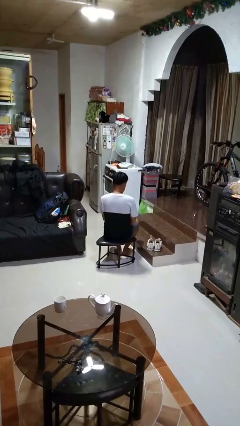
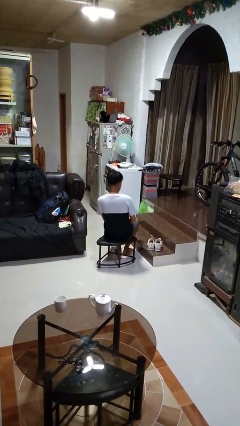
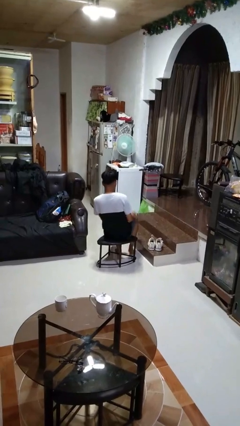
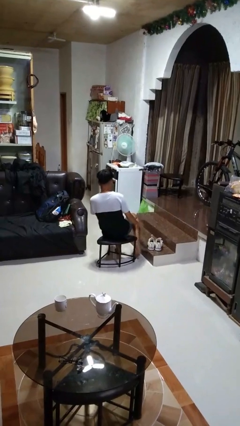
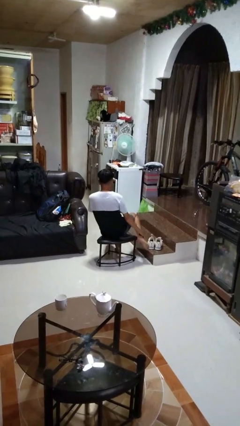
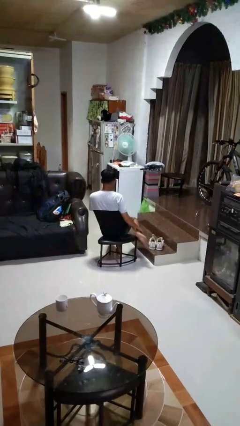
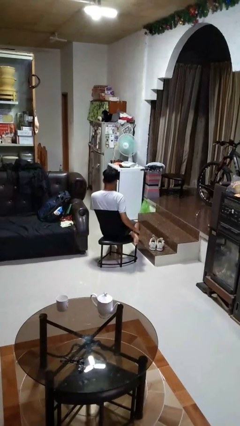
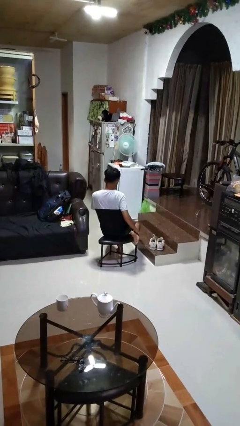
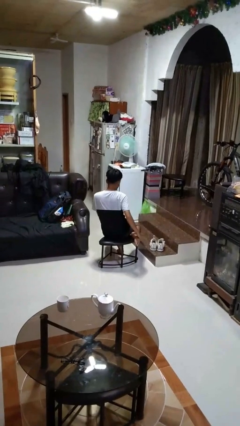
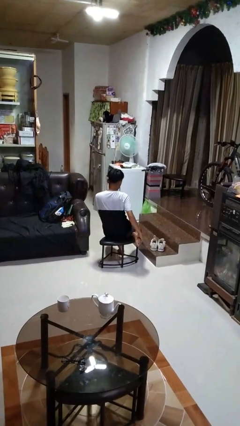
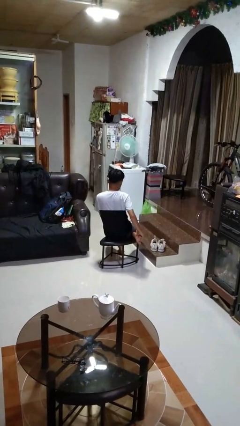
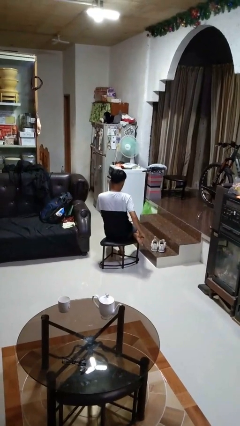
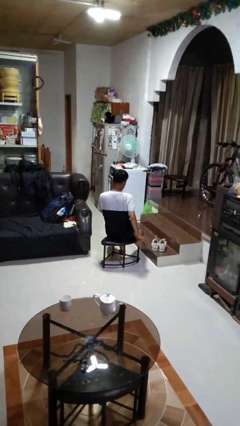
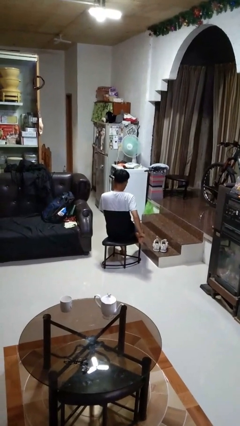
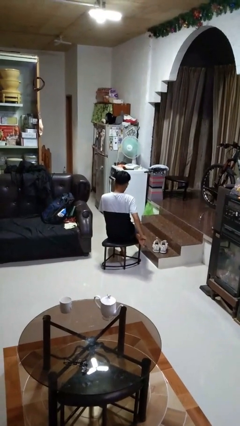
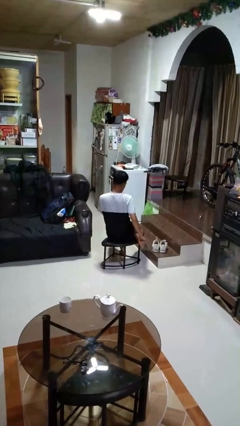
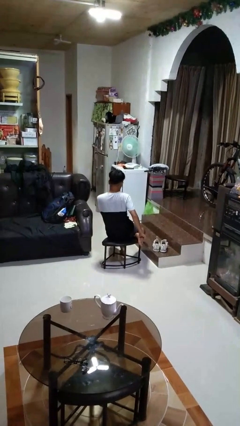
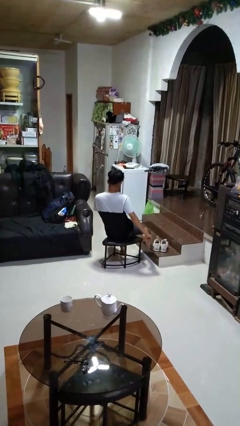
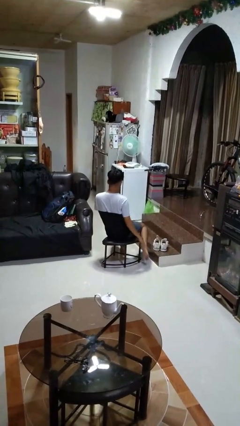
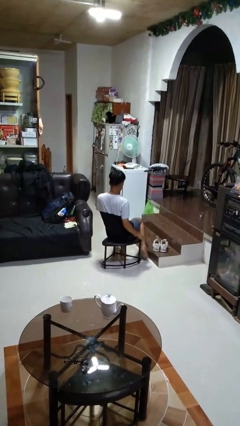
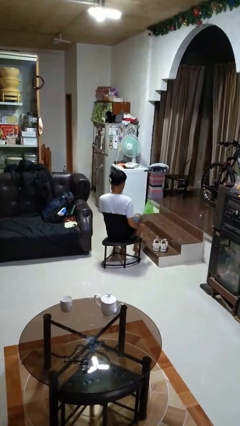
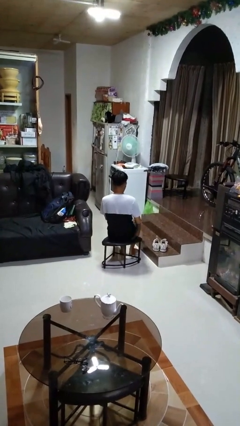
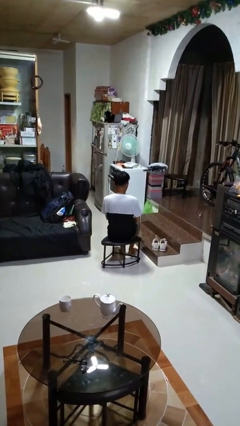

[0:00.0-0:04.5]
person rubs foot

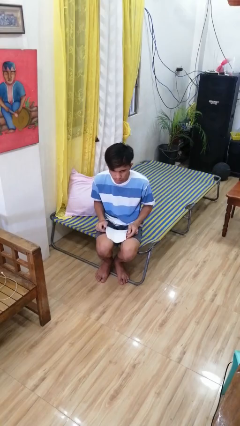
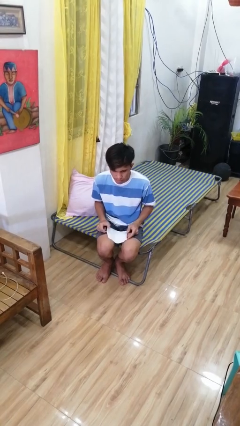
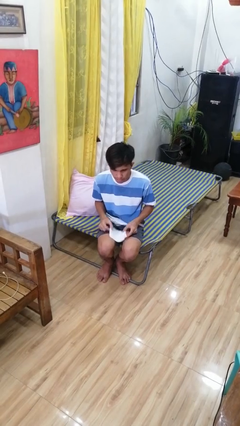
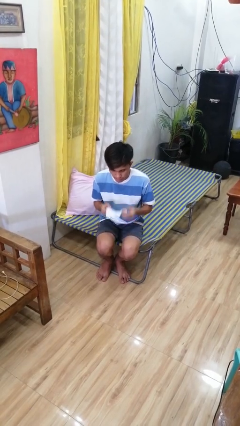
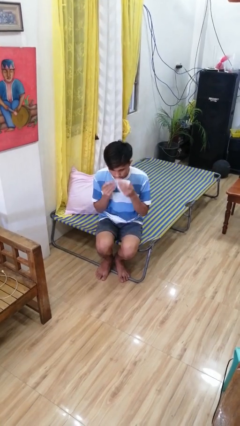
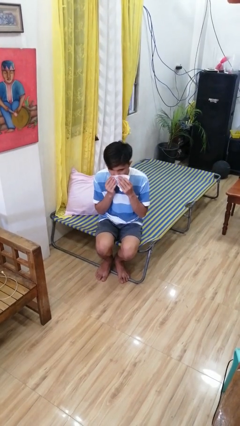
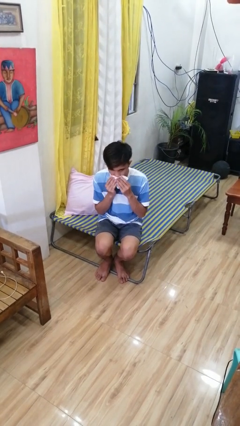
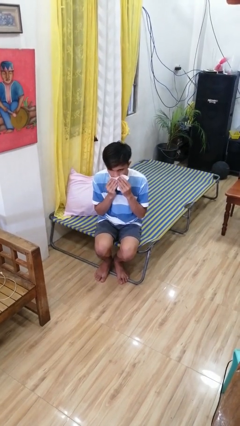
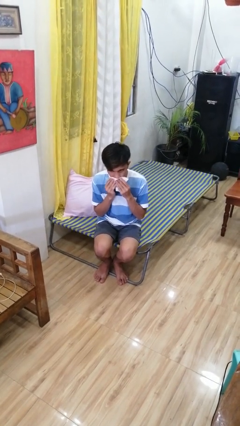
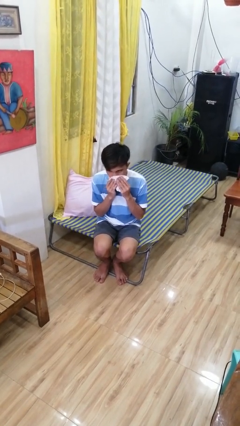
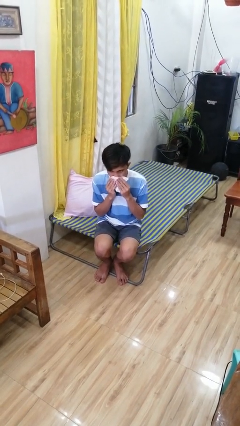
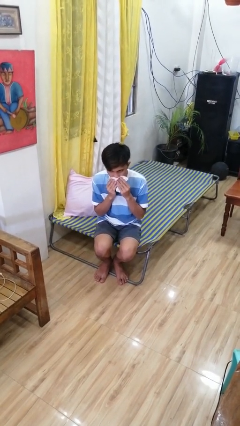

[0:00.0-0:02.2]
person wipes mouth with napkin

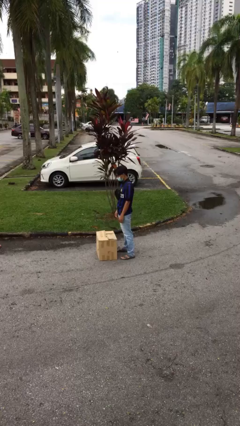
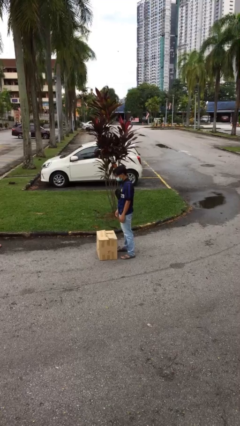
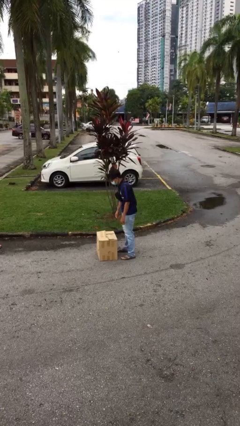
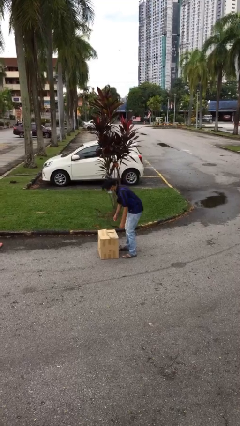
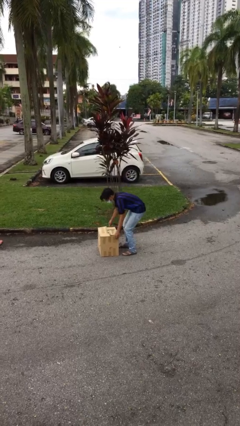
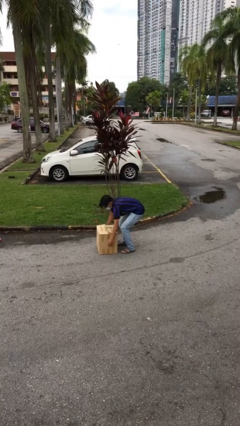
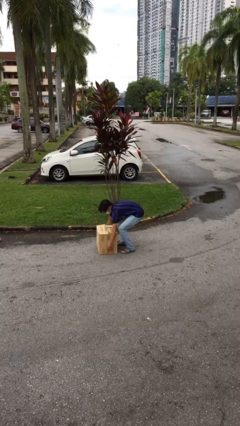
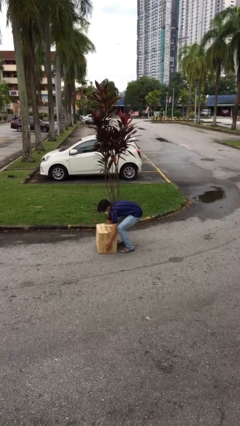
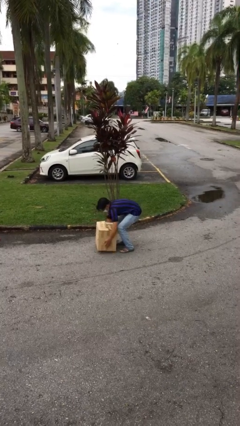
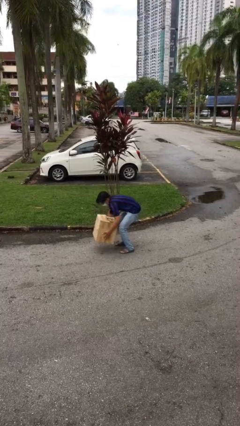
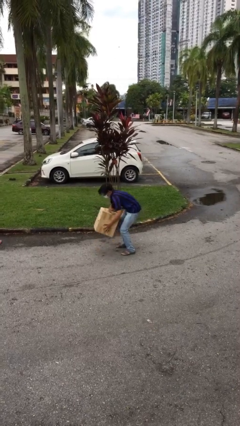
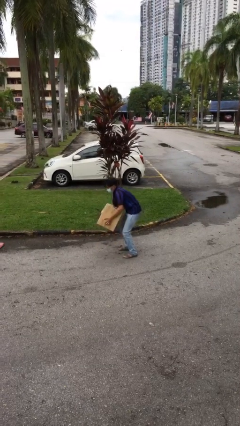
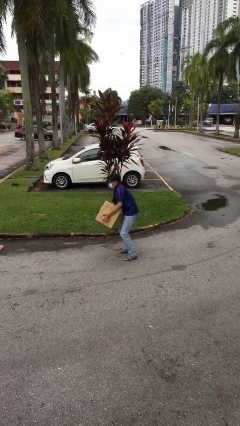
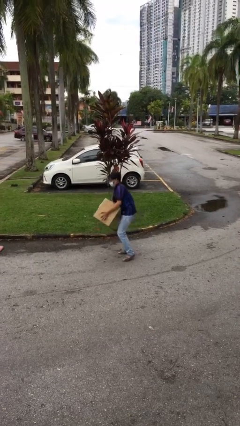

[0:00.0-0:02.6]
person picks up object from floor

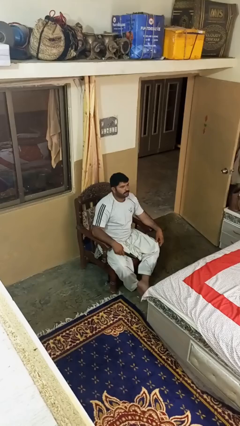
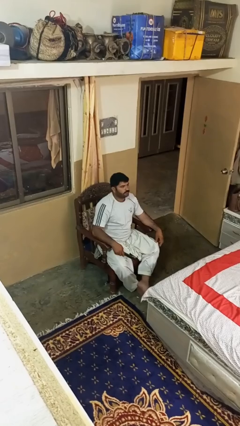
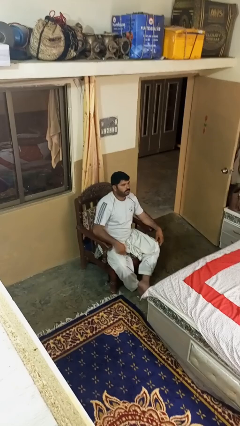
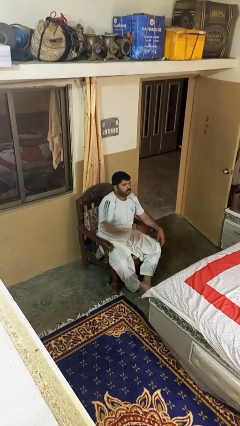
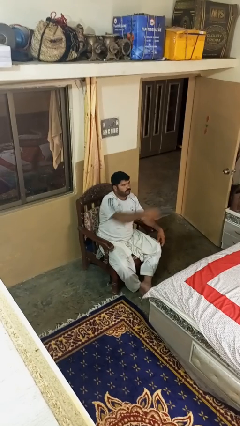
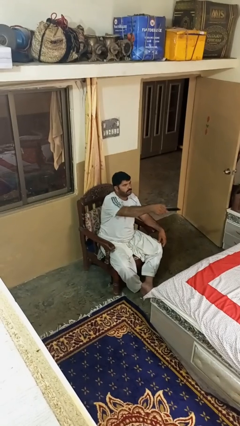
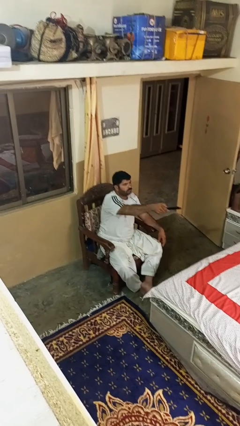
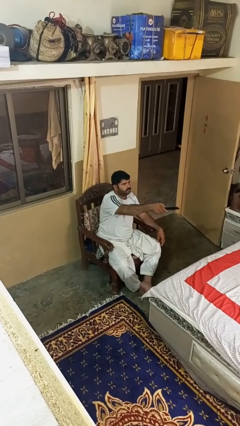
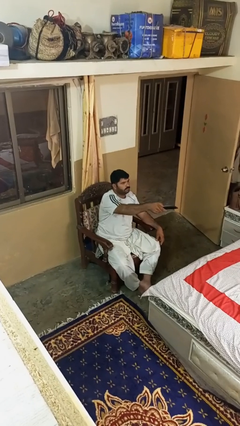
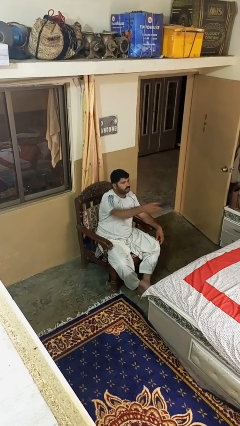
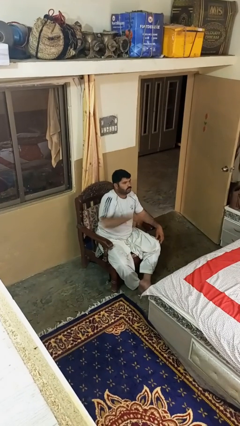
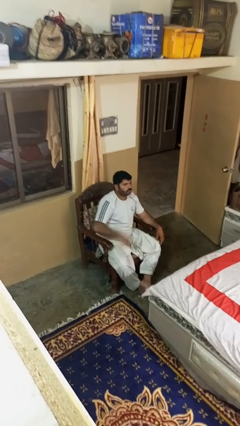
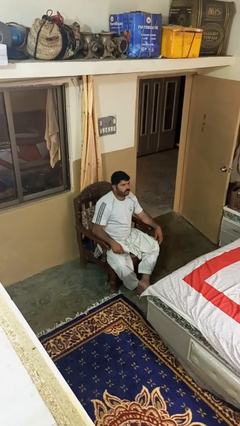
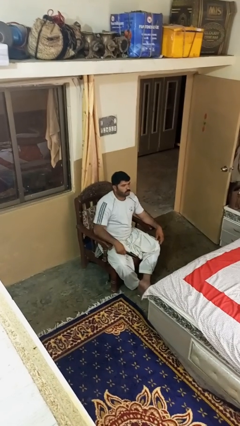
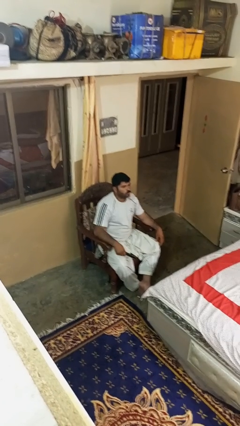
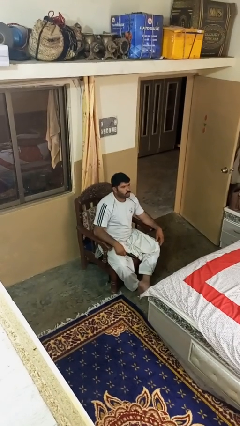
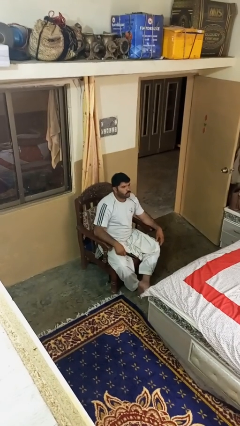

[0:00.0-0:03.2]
person uses television remote

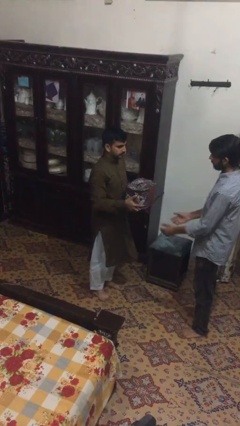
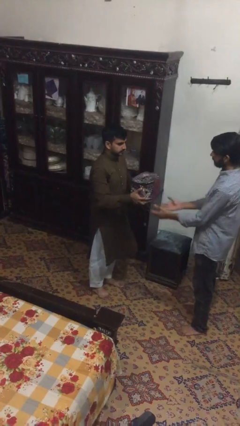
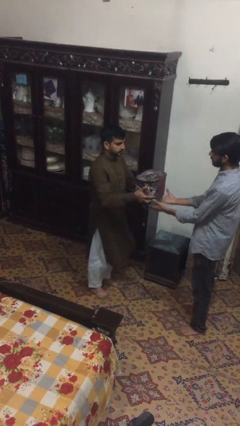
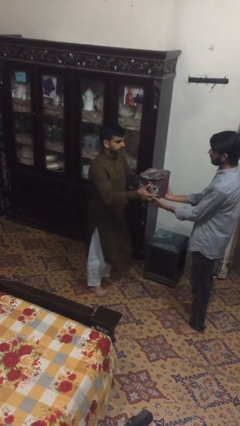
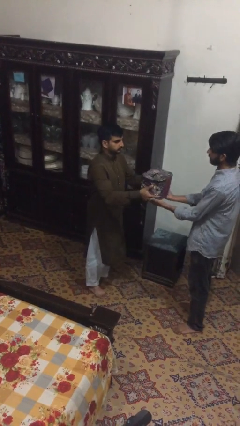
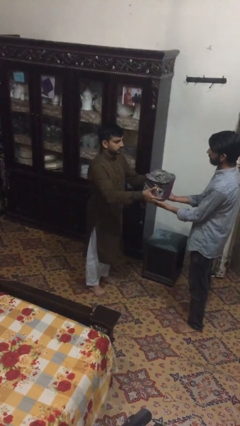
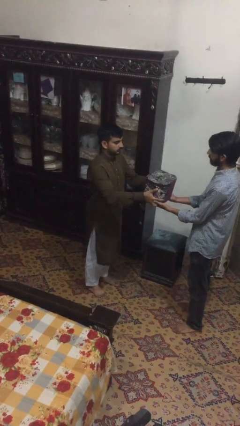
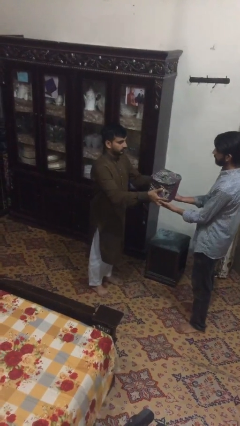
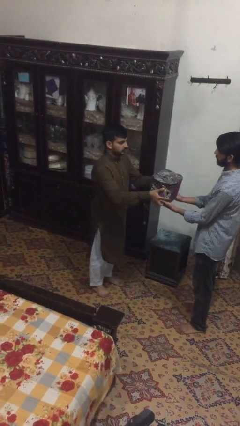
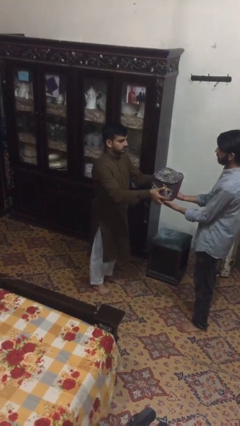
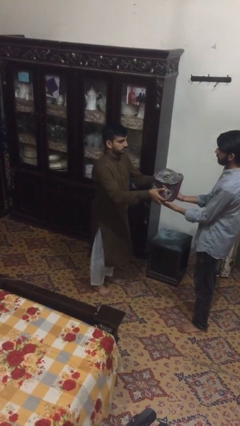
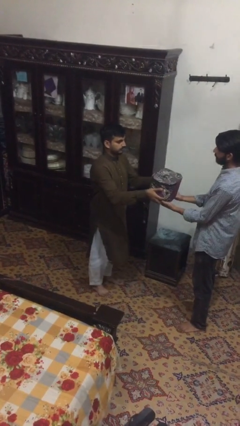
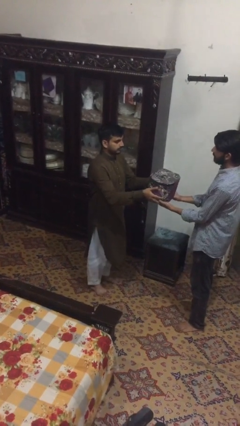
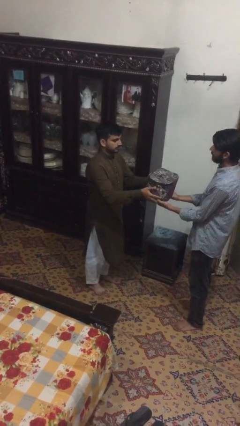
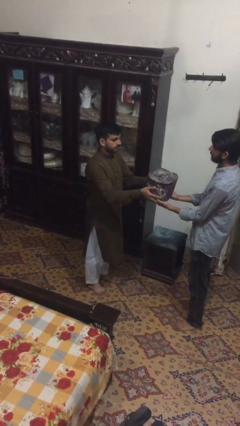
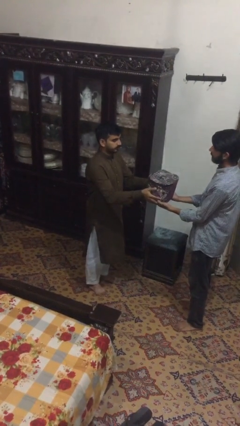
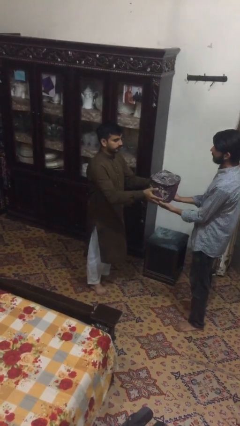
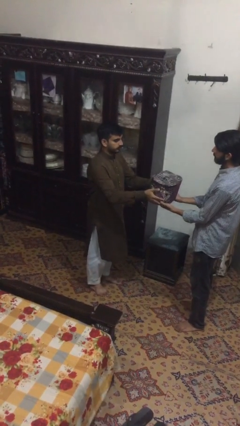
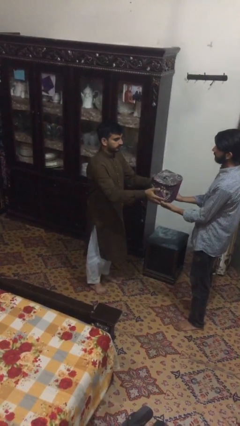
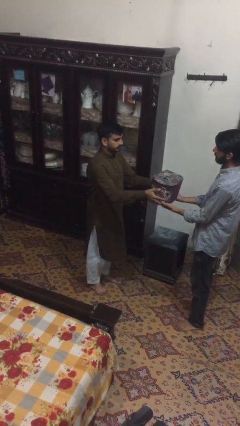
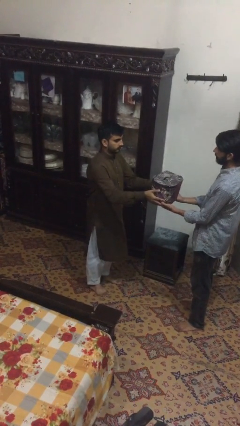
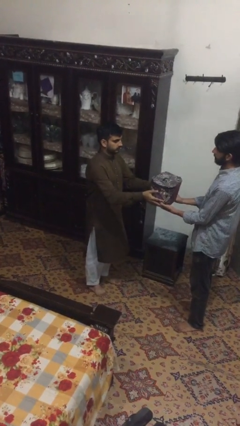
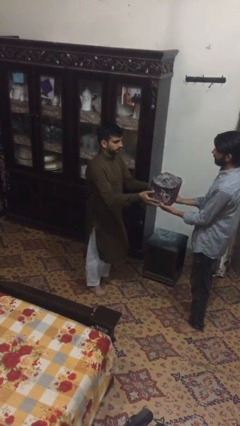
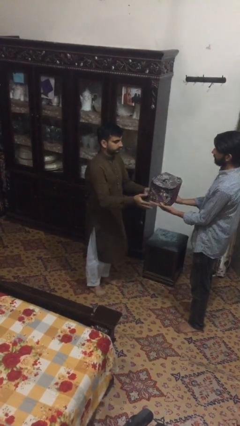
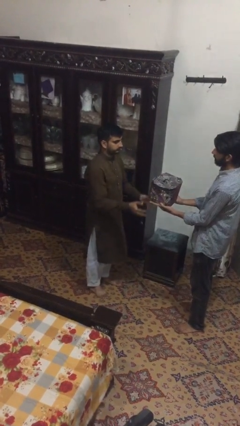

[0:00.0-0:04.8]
person transfers object to person

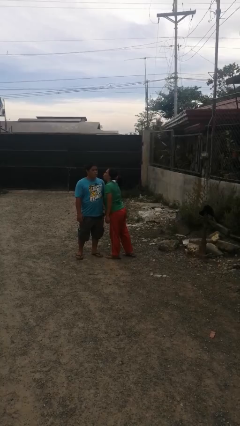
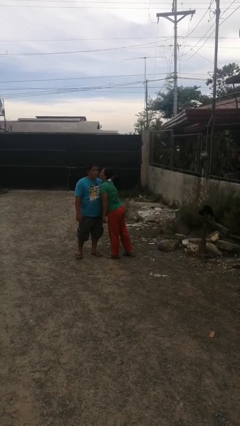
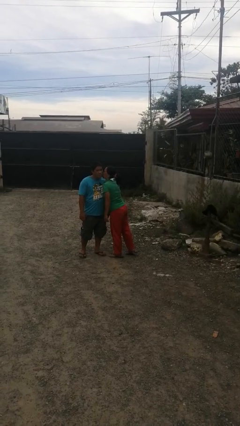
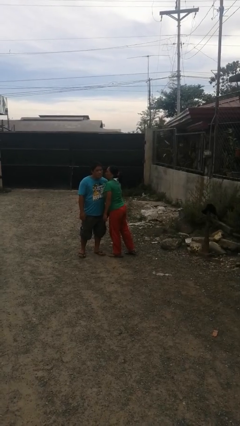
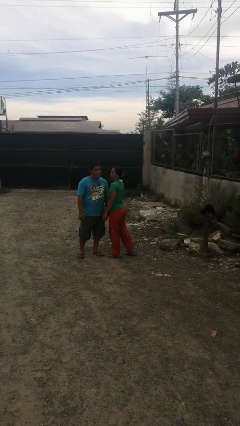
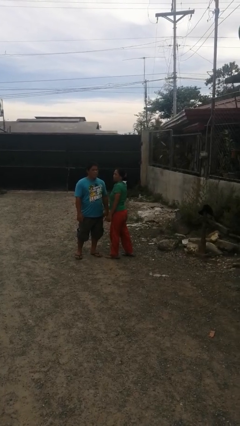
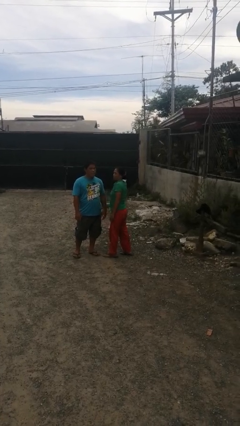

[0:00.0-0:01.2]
person kisses cheek of person
